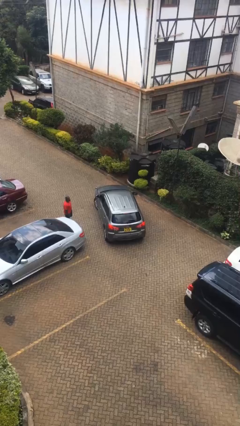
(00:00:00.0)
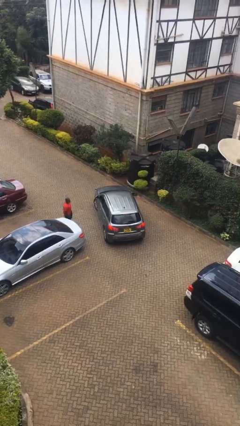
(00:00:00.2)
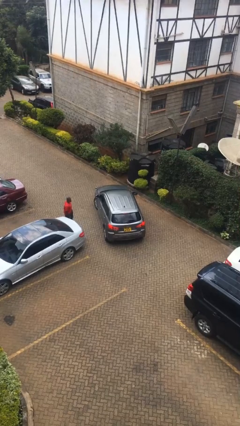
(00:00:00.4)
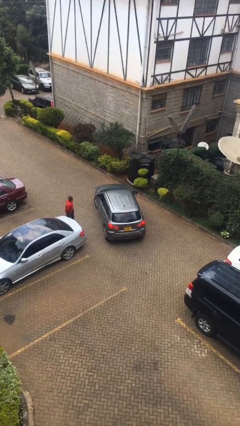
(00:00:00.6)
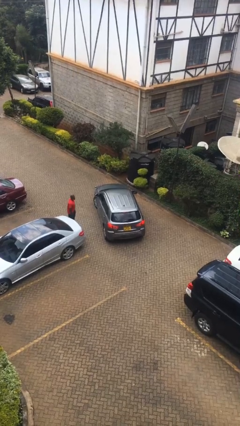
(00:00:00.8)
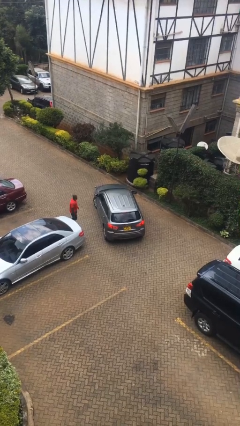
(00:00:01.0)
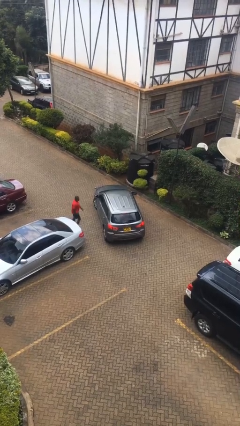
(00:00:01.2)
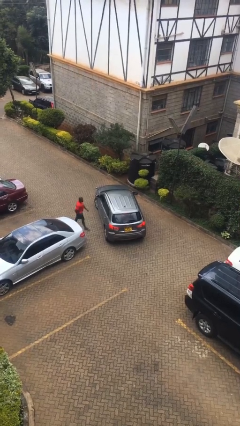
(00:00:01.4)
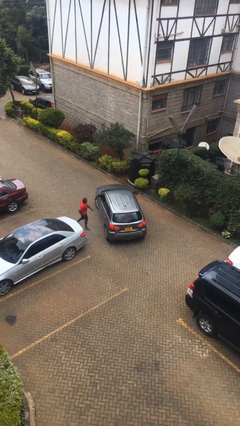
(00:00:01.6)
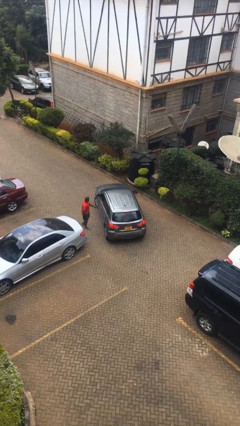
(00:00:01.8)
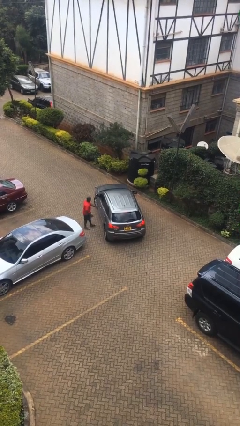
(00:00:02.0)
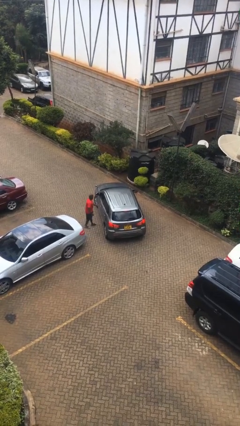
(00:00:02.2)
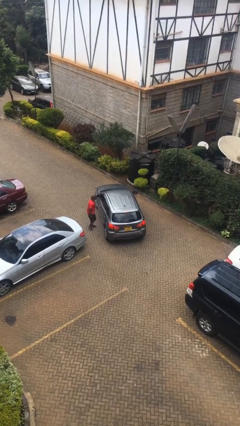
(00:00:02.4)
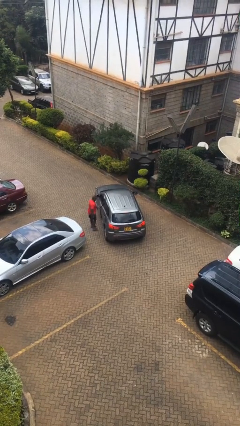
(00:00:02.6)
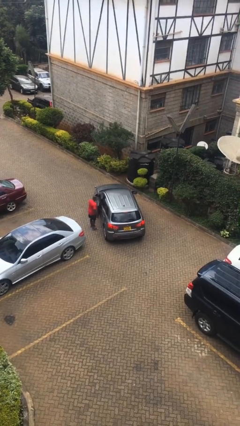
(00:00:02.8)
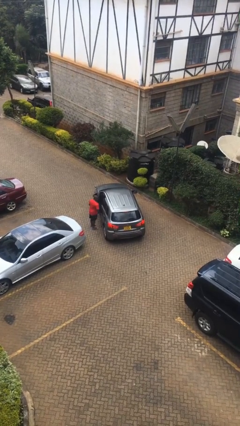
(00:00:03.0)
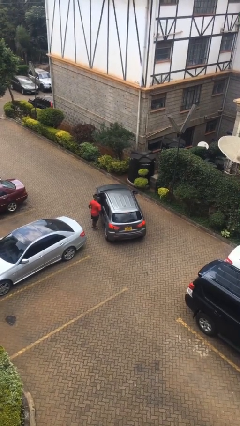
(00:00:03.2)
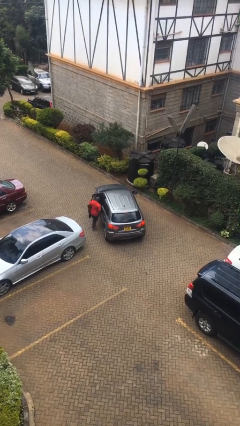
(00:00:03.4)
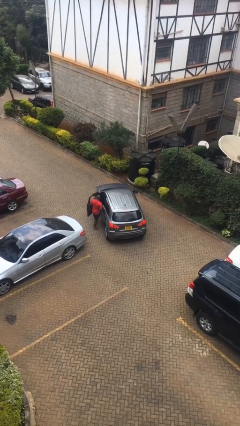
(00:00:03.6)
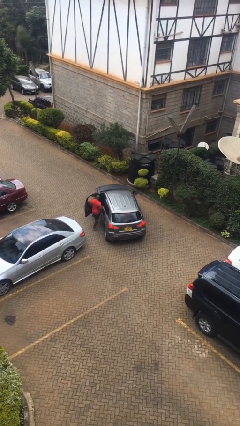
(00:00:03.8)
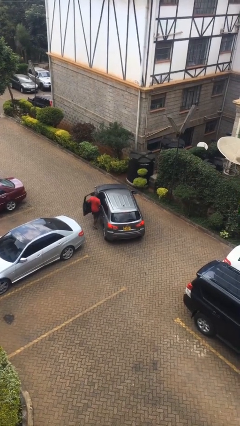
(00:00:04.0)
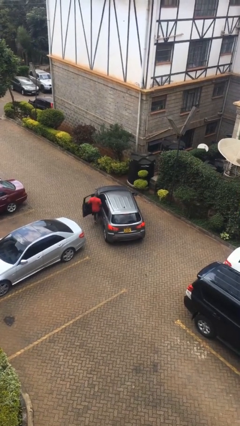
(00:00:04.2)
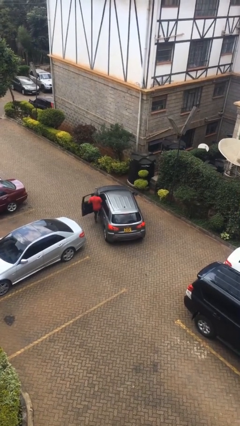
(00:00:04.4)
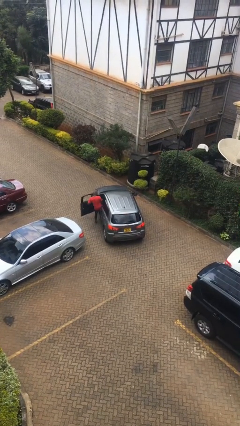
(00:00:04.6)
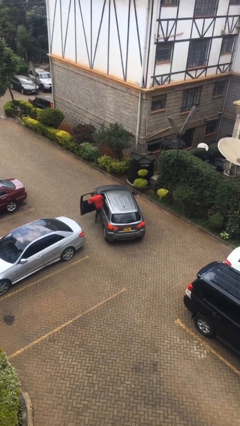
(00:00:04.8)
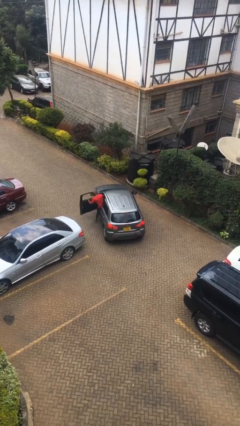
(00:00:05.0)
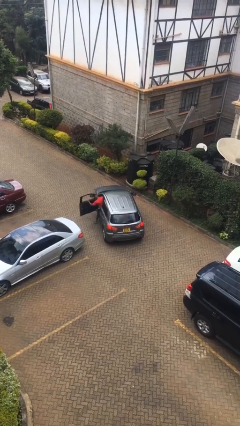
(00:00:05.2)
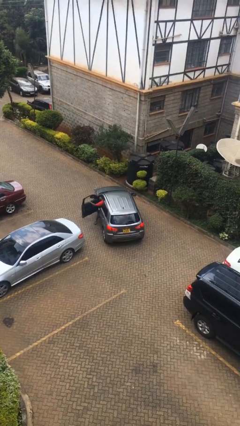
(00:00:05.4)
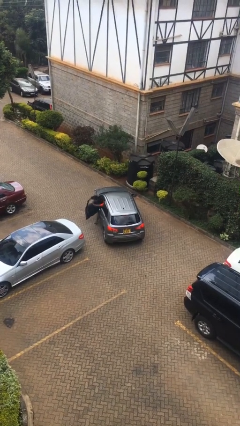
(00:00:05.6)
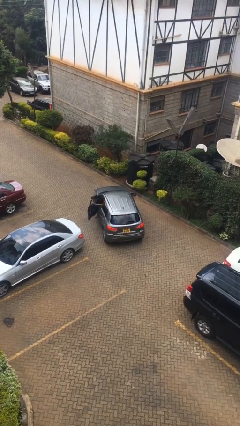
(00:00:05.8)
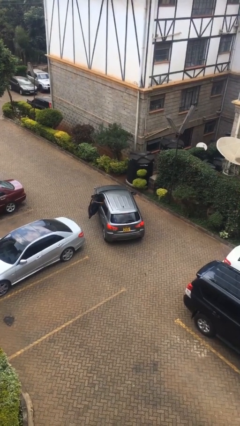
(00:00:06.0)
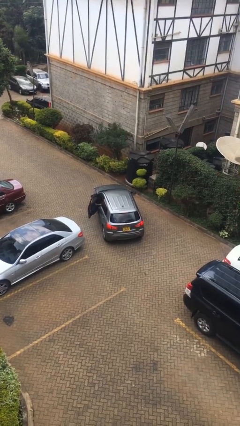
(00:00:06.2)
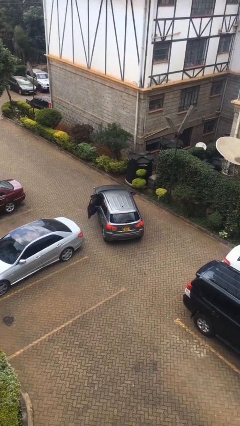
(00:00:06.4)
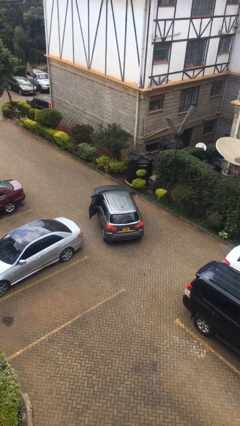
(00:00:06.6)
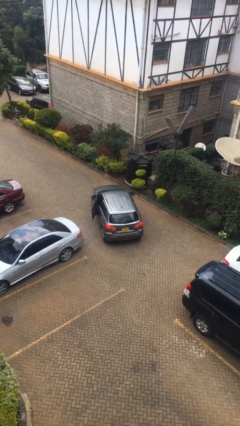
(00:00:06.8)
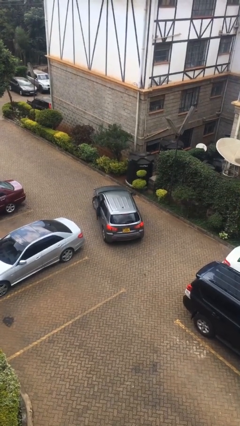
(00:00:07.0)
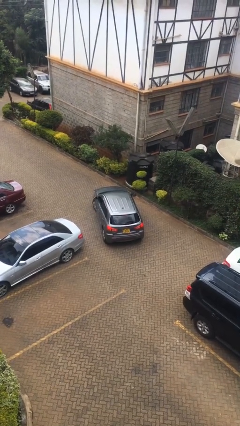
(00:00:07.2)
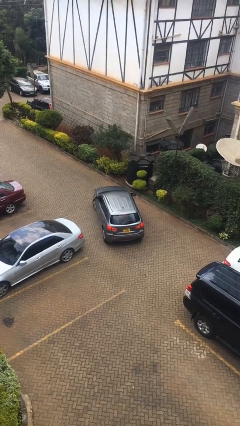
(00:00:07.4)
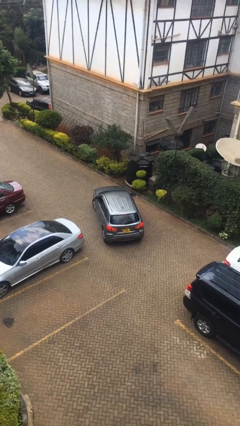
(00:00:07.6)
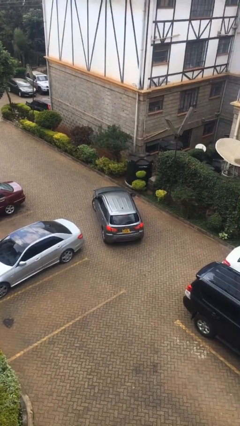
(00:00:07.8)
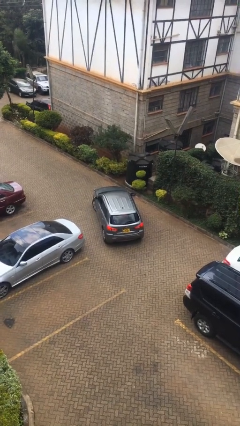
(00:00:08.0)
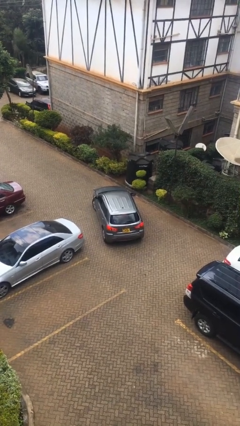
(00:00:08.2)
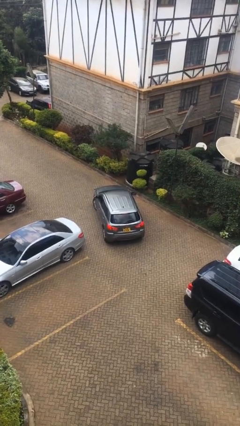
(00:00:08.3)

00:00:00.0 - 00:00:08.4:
car picks up person

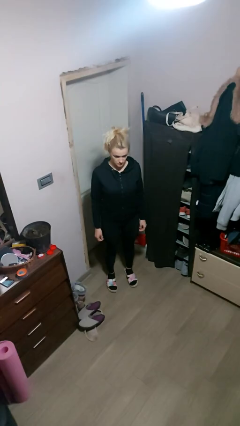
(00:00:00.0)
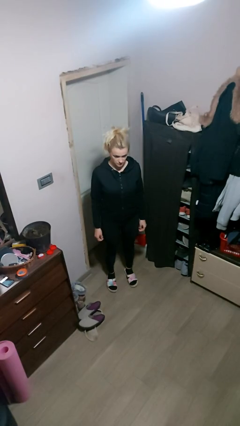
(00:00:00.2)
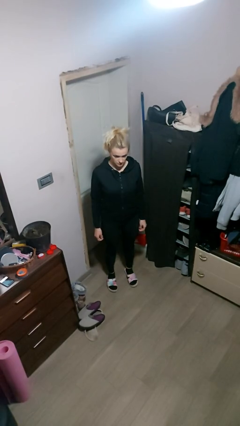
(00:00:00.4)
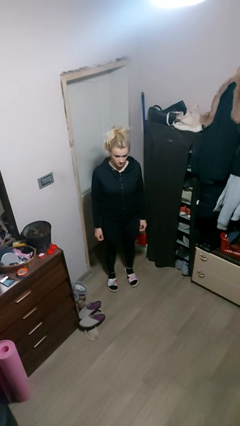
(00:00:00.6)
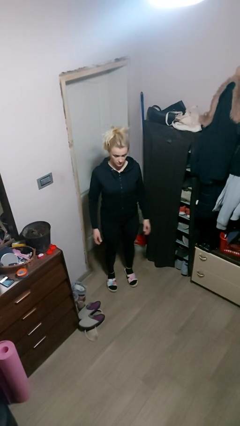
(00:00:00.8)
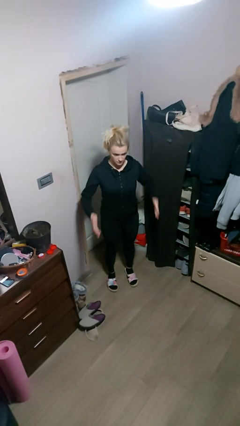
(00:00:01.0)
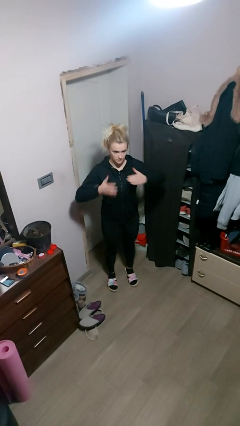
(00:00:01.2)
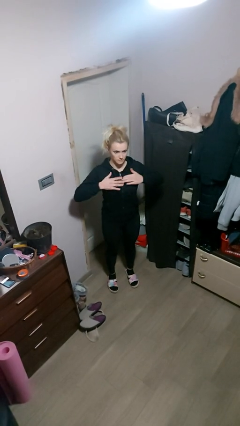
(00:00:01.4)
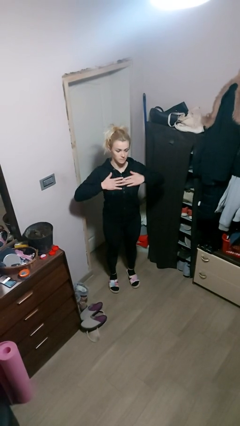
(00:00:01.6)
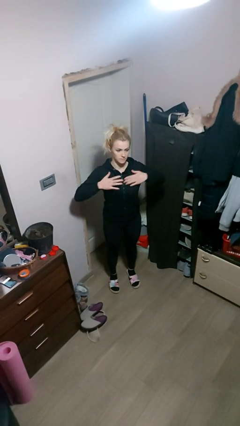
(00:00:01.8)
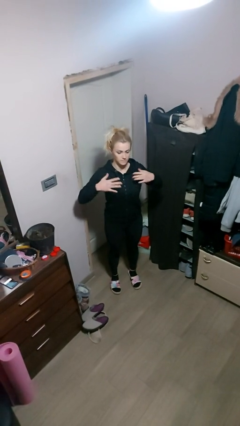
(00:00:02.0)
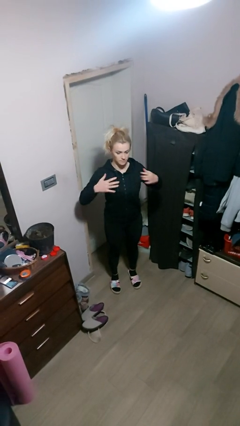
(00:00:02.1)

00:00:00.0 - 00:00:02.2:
person drums on chest

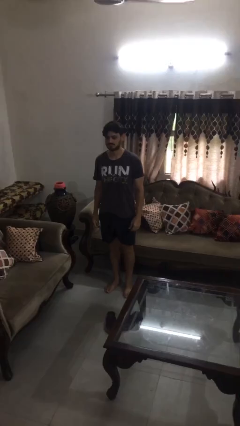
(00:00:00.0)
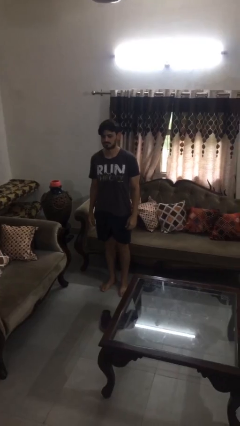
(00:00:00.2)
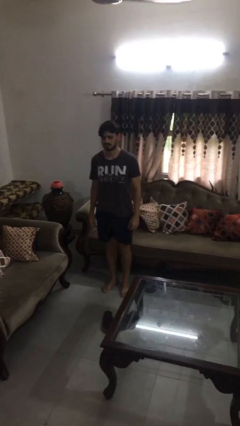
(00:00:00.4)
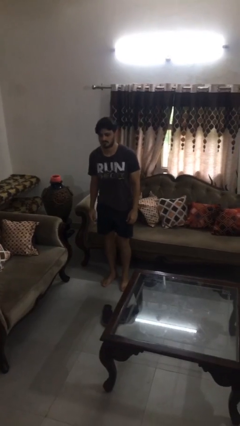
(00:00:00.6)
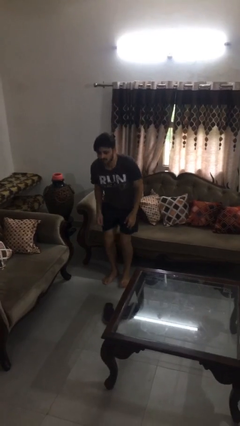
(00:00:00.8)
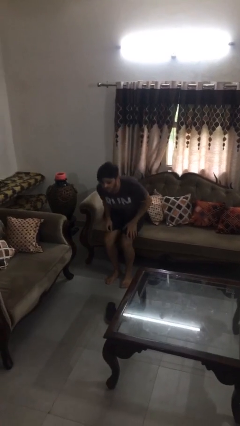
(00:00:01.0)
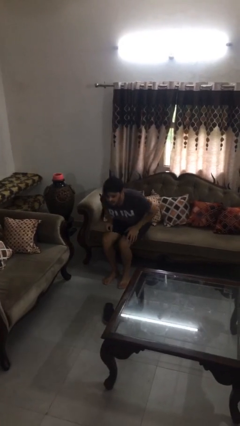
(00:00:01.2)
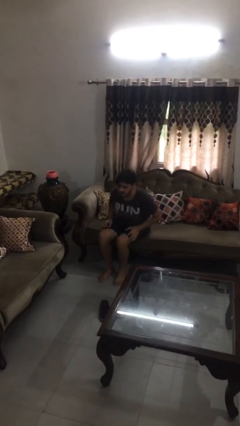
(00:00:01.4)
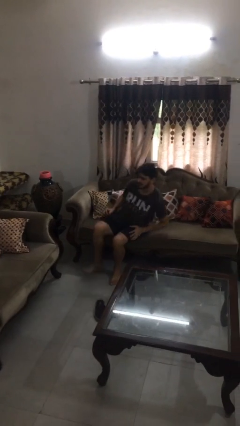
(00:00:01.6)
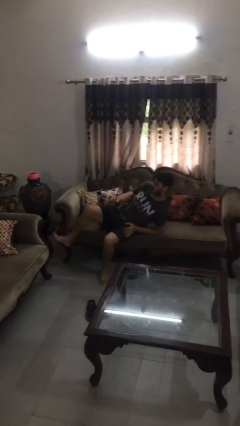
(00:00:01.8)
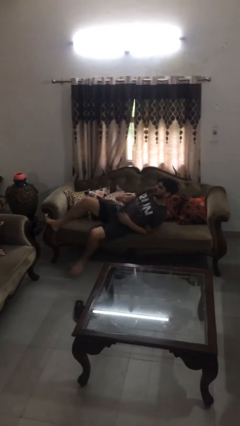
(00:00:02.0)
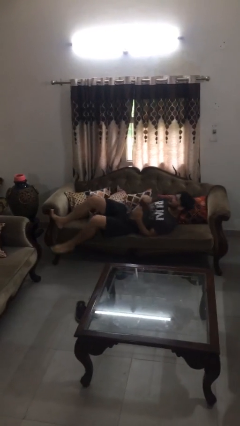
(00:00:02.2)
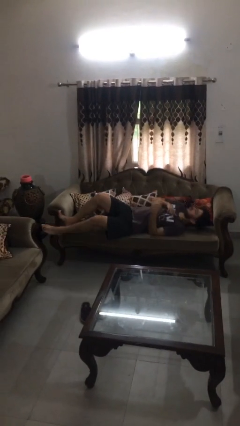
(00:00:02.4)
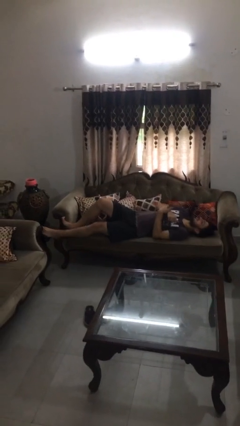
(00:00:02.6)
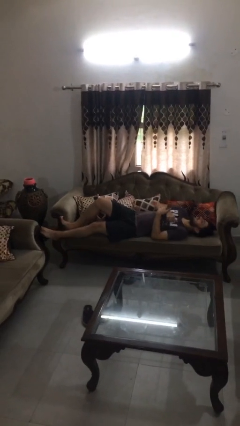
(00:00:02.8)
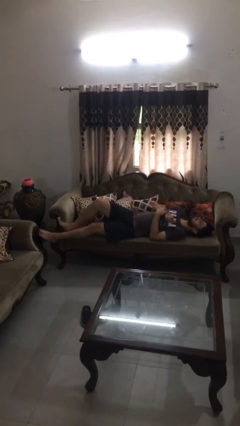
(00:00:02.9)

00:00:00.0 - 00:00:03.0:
person lies down on couch

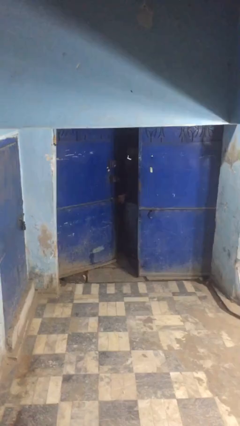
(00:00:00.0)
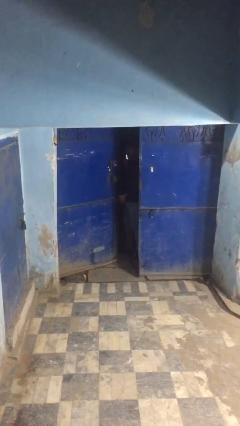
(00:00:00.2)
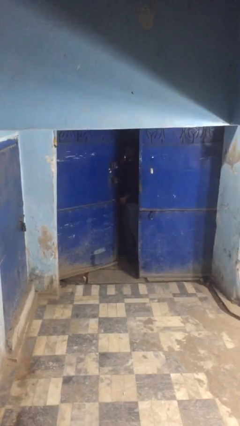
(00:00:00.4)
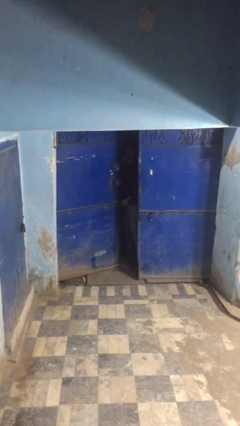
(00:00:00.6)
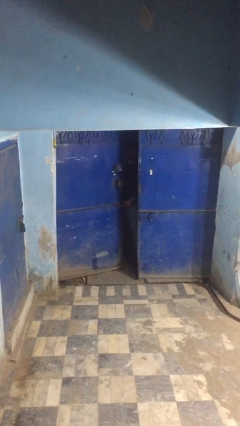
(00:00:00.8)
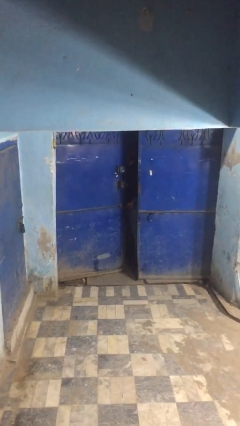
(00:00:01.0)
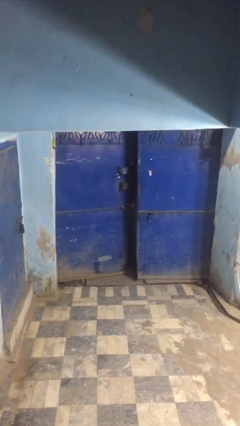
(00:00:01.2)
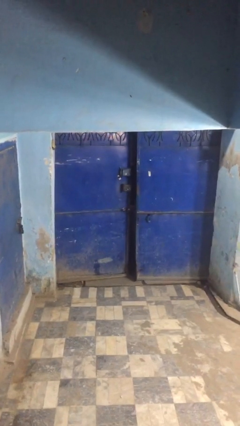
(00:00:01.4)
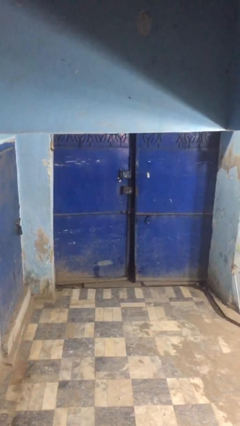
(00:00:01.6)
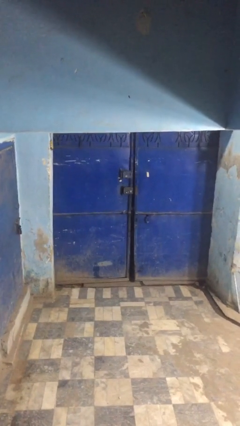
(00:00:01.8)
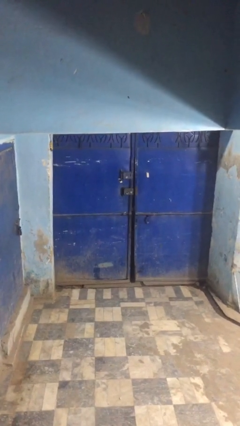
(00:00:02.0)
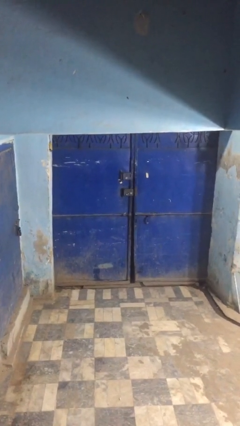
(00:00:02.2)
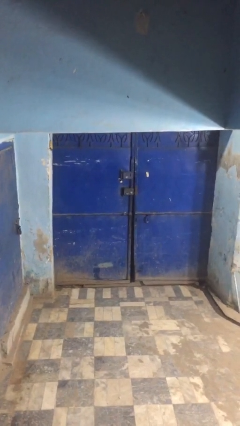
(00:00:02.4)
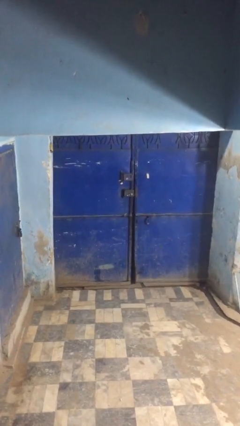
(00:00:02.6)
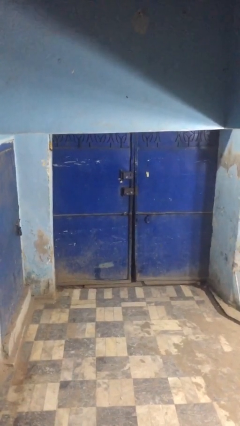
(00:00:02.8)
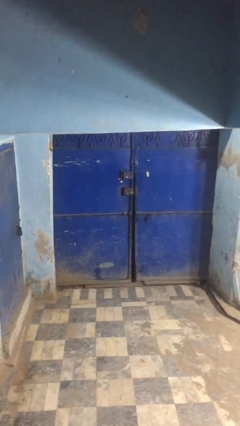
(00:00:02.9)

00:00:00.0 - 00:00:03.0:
person closes facility door

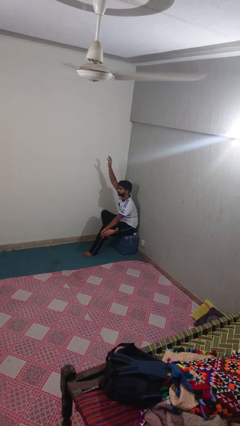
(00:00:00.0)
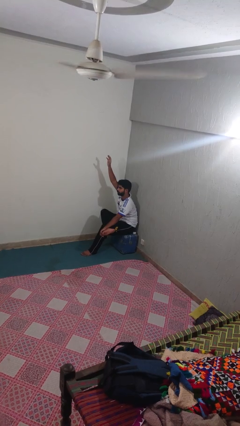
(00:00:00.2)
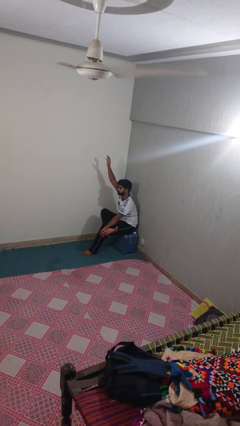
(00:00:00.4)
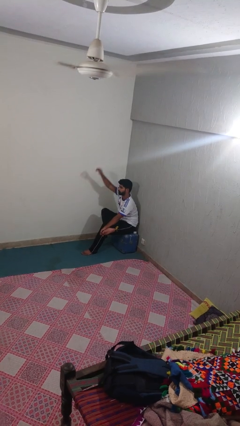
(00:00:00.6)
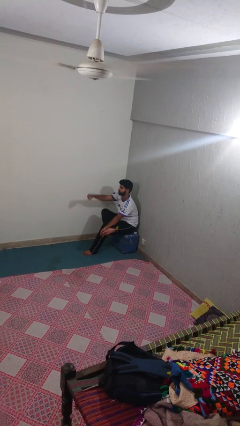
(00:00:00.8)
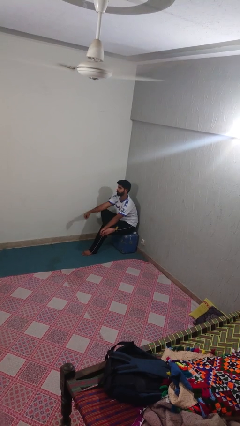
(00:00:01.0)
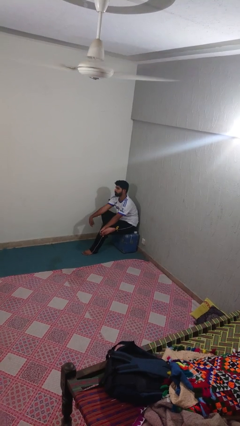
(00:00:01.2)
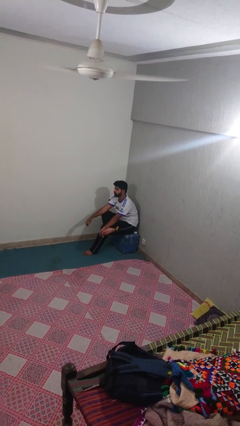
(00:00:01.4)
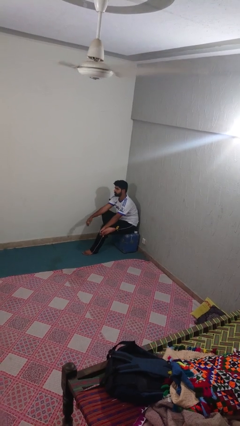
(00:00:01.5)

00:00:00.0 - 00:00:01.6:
person gestures lower hand
